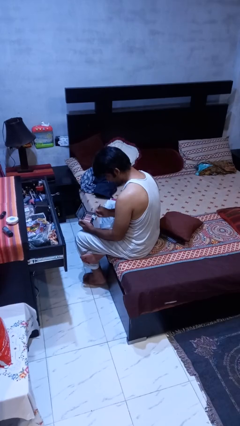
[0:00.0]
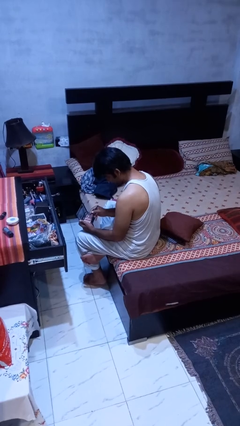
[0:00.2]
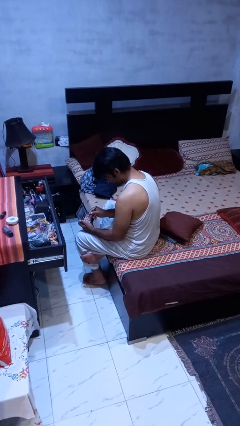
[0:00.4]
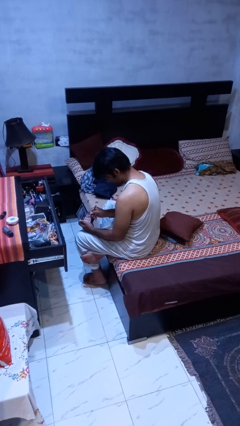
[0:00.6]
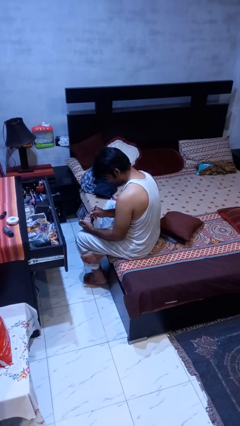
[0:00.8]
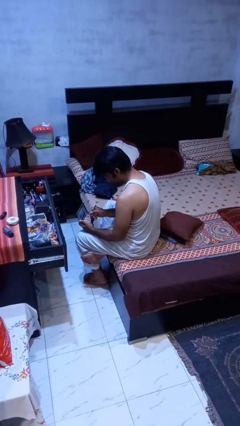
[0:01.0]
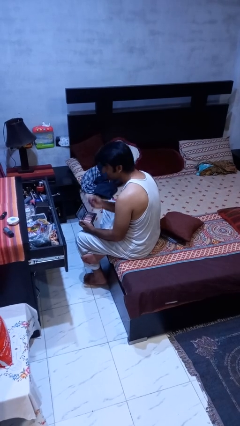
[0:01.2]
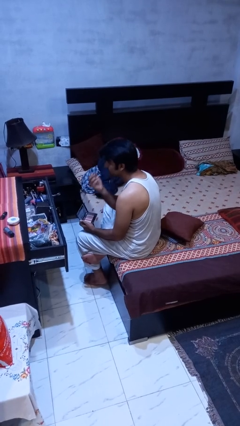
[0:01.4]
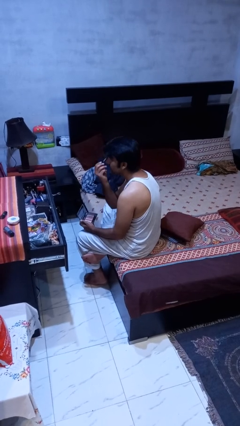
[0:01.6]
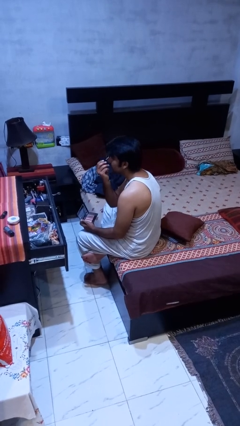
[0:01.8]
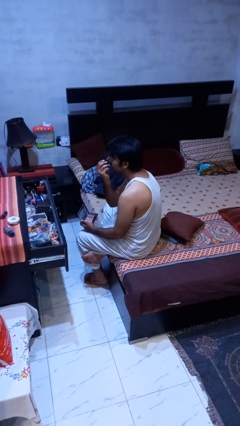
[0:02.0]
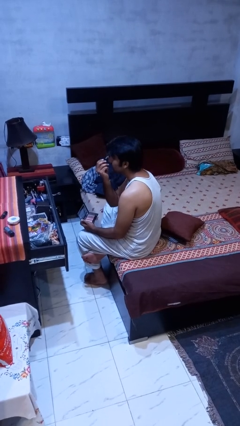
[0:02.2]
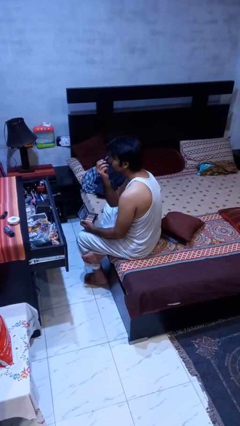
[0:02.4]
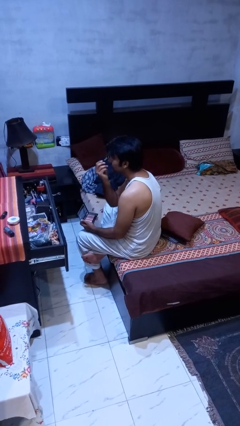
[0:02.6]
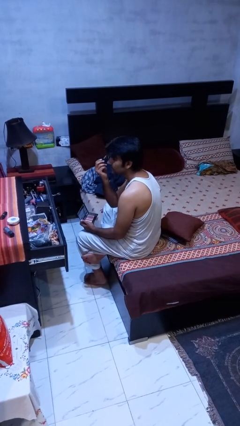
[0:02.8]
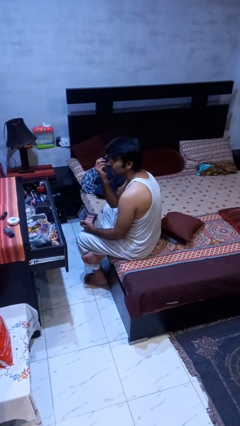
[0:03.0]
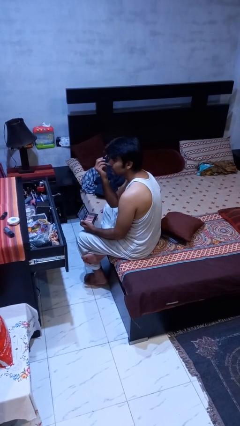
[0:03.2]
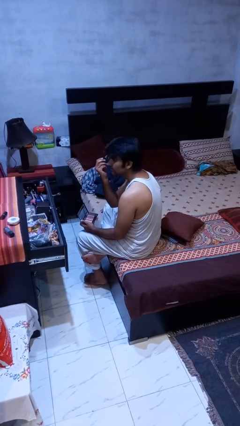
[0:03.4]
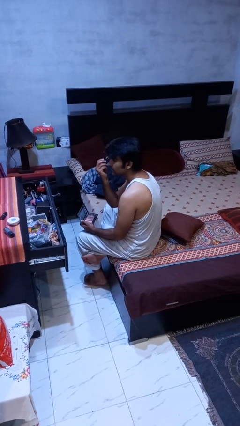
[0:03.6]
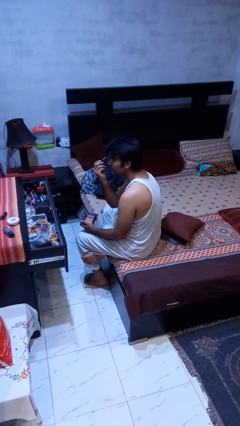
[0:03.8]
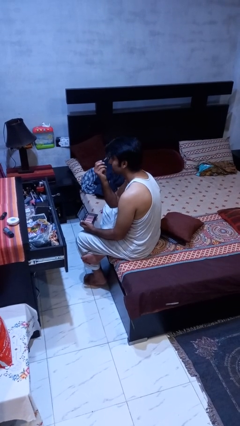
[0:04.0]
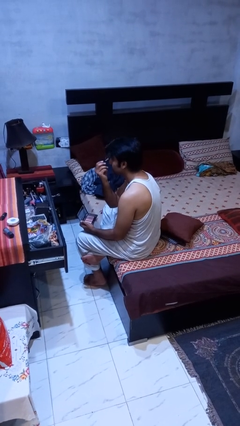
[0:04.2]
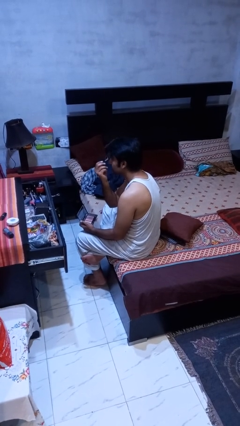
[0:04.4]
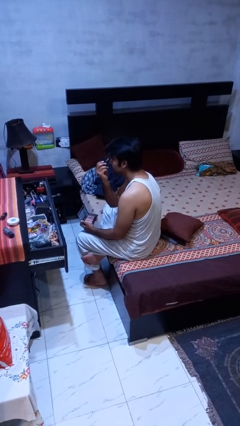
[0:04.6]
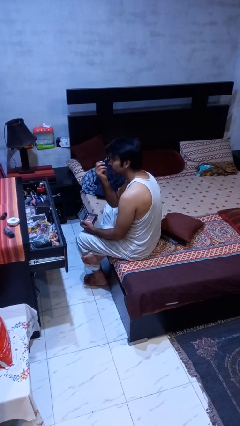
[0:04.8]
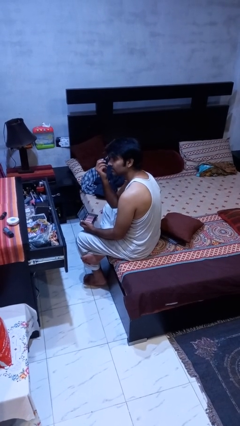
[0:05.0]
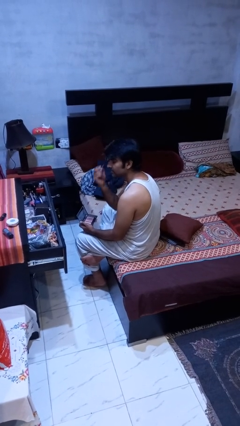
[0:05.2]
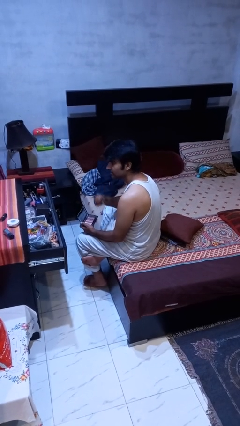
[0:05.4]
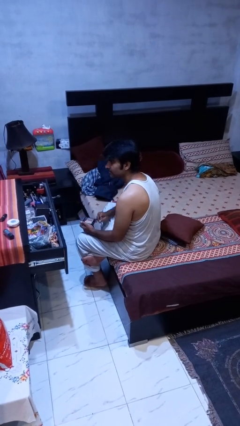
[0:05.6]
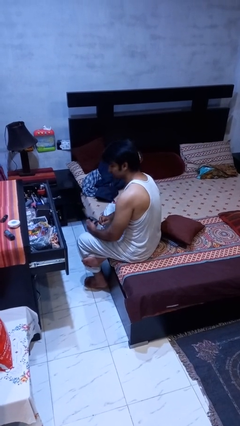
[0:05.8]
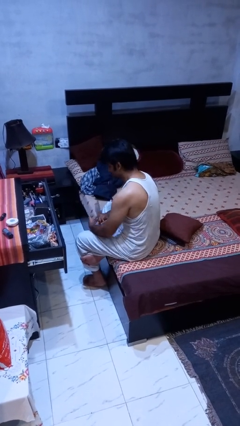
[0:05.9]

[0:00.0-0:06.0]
person applies eye makeup

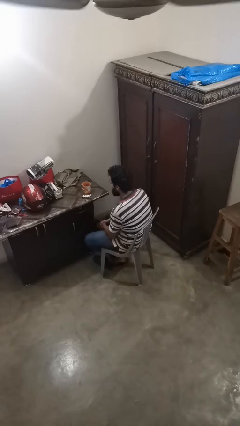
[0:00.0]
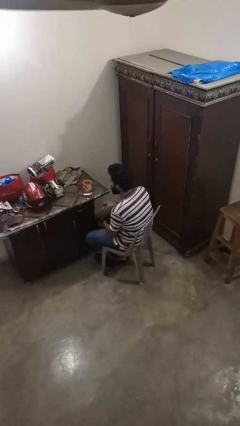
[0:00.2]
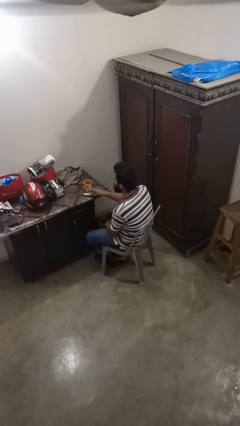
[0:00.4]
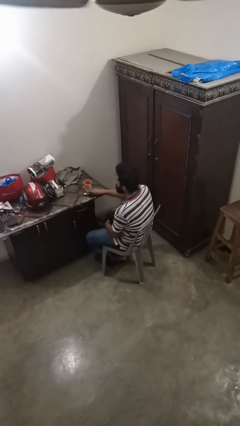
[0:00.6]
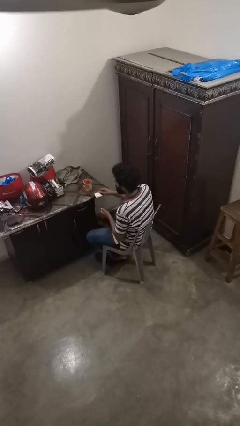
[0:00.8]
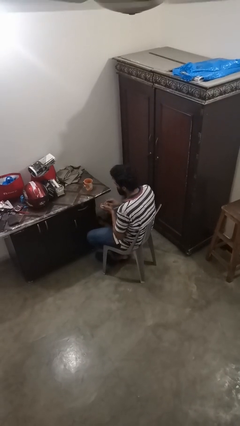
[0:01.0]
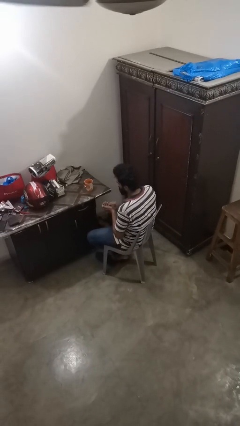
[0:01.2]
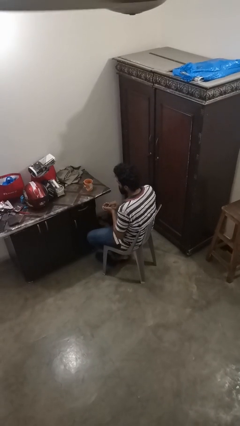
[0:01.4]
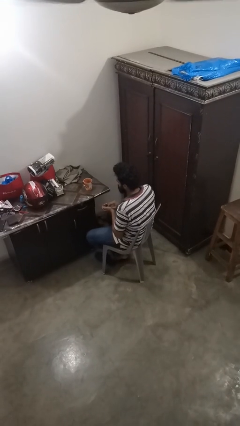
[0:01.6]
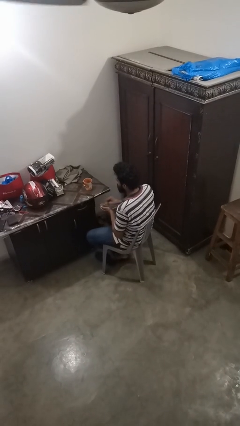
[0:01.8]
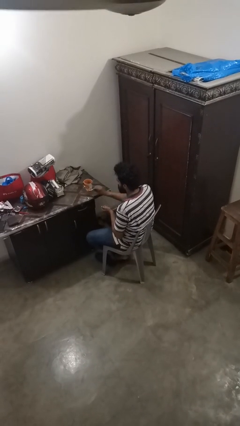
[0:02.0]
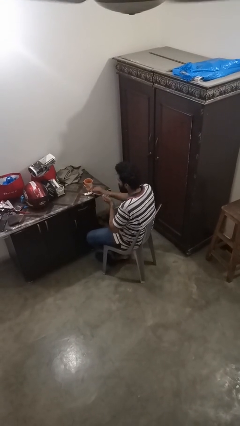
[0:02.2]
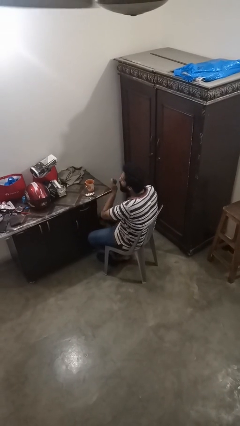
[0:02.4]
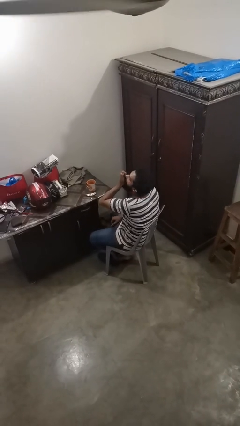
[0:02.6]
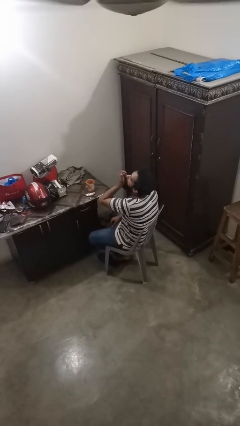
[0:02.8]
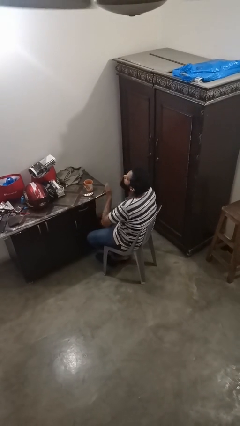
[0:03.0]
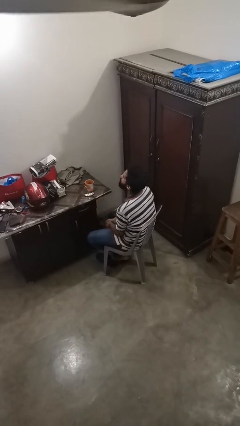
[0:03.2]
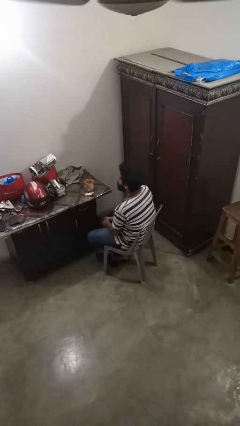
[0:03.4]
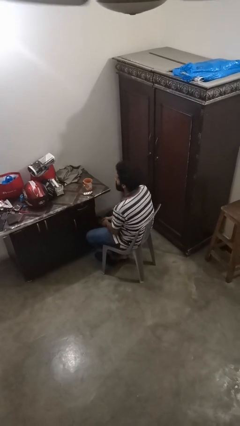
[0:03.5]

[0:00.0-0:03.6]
person takes medicine pills

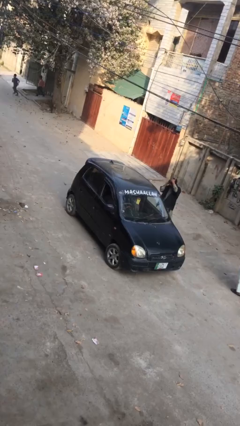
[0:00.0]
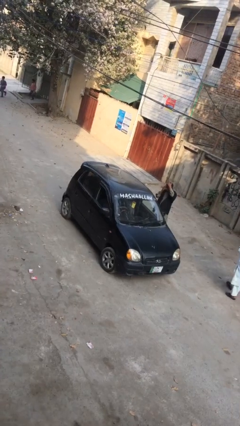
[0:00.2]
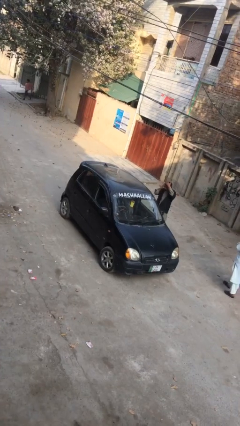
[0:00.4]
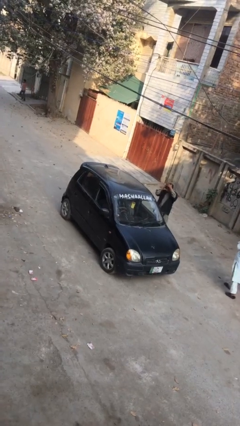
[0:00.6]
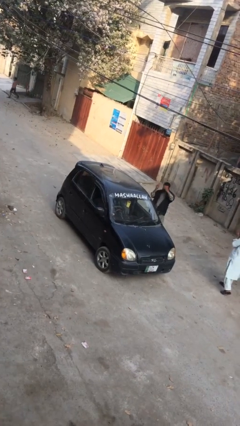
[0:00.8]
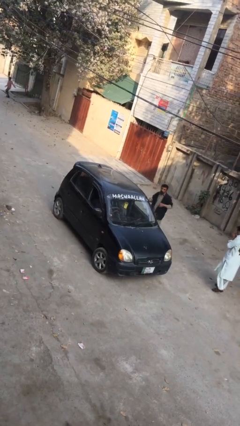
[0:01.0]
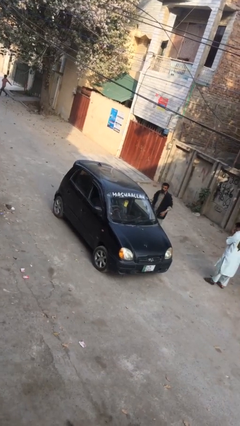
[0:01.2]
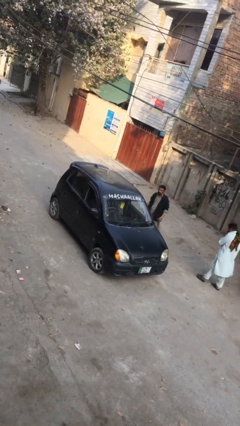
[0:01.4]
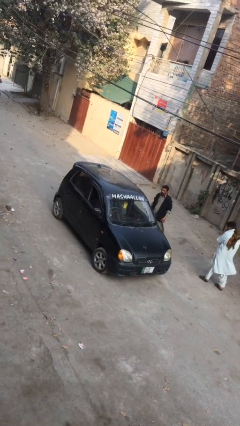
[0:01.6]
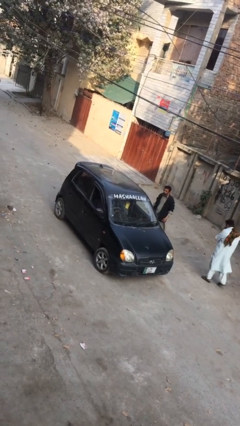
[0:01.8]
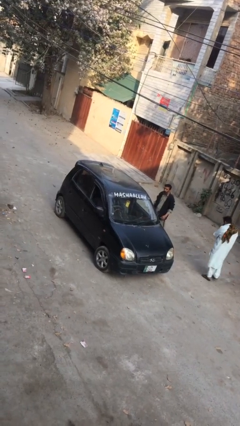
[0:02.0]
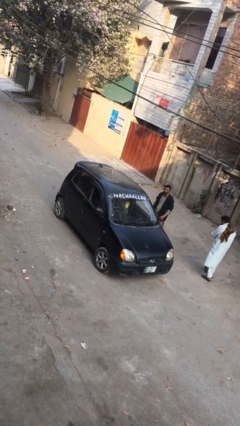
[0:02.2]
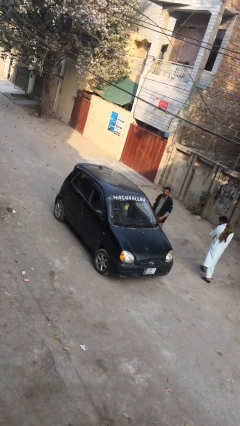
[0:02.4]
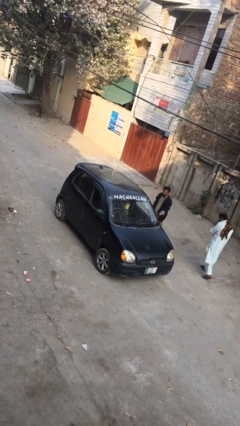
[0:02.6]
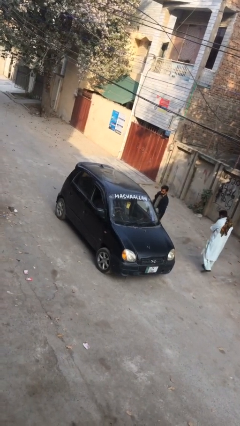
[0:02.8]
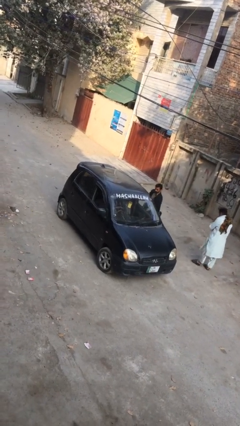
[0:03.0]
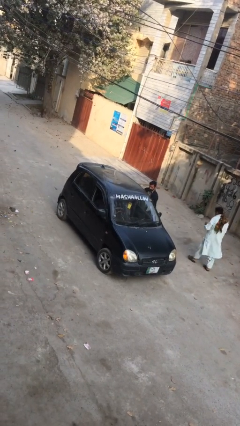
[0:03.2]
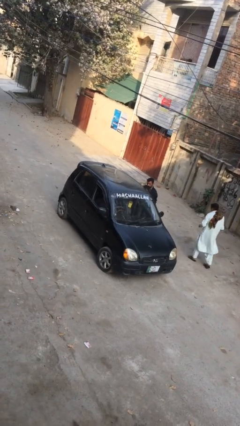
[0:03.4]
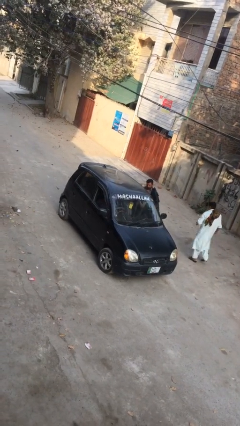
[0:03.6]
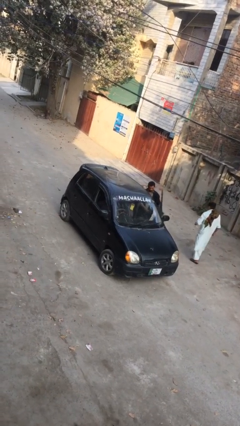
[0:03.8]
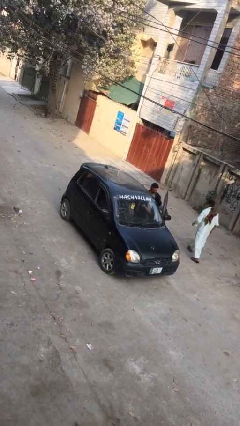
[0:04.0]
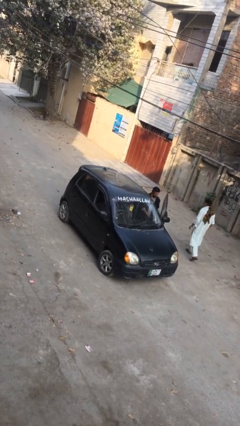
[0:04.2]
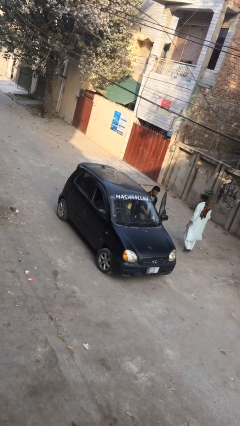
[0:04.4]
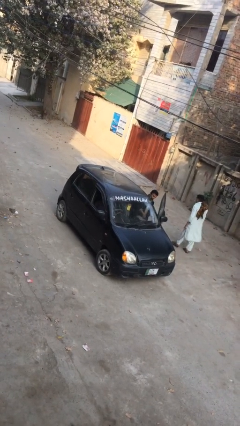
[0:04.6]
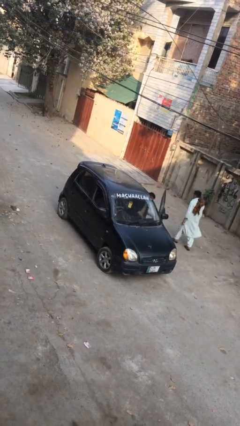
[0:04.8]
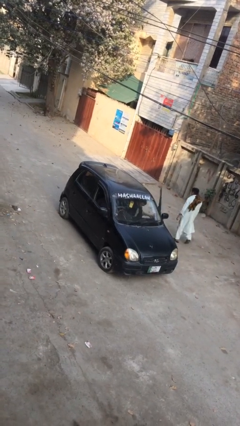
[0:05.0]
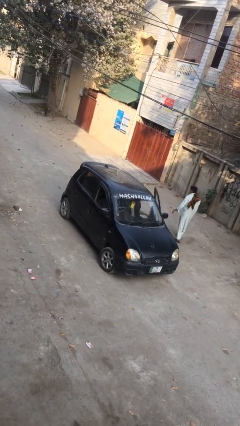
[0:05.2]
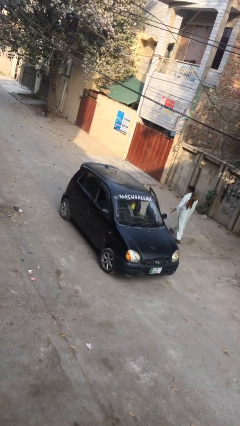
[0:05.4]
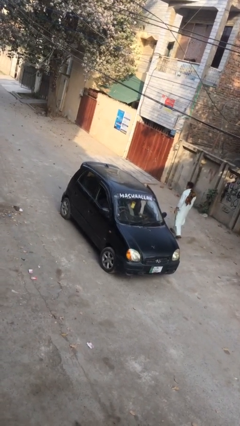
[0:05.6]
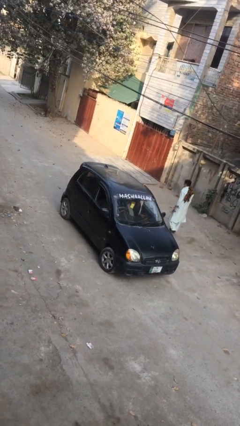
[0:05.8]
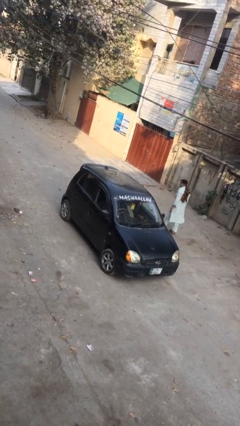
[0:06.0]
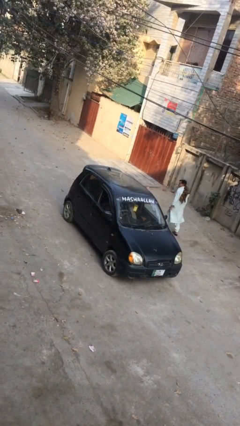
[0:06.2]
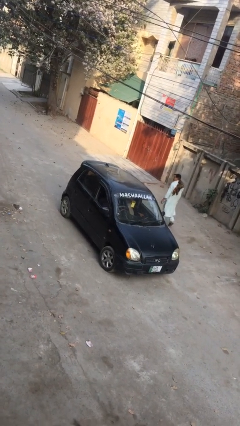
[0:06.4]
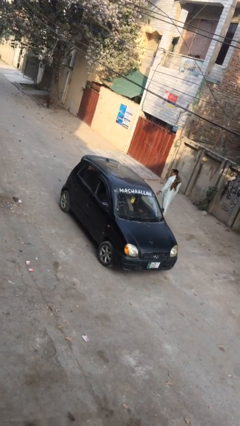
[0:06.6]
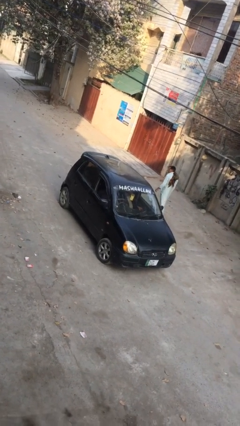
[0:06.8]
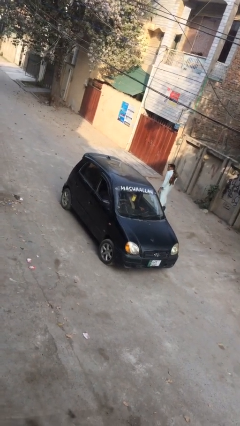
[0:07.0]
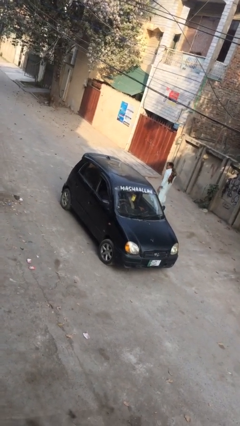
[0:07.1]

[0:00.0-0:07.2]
car picks up person

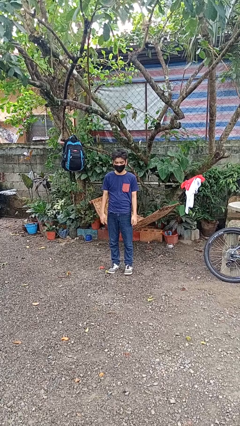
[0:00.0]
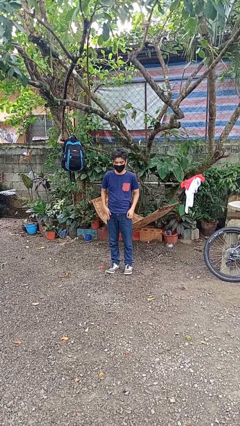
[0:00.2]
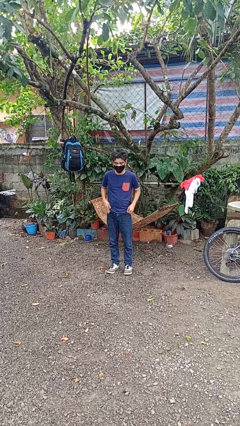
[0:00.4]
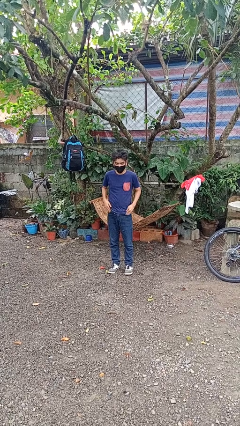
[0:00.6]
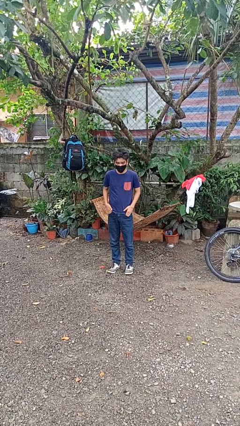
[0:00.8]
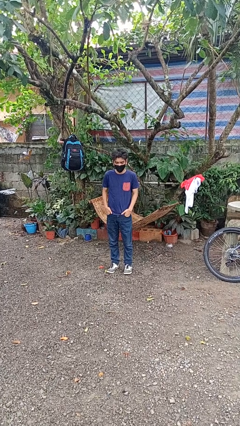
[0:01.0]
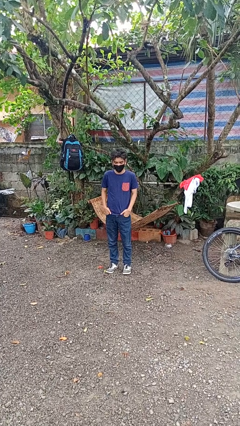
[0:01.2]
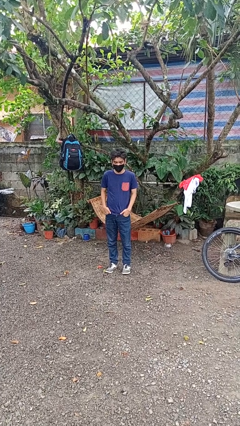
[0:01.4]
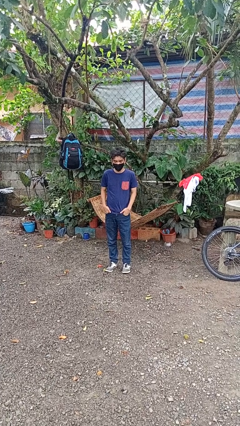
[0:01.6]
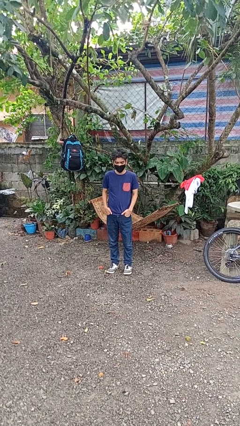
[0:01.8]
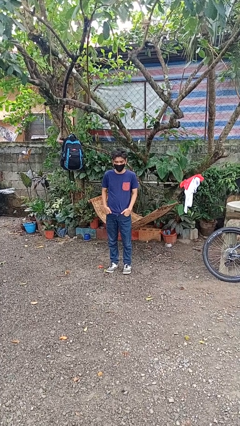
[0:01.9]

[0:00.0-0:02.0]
person puts hands in back pockets
